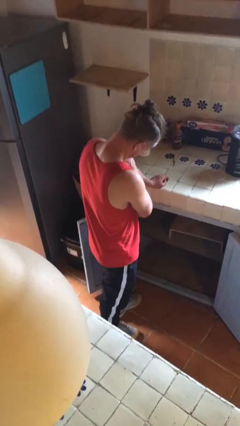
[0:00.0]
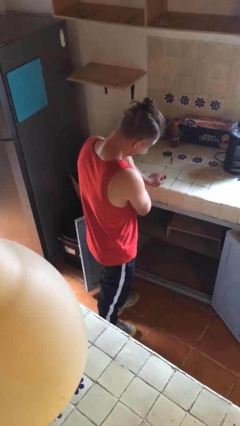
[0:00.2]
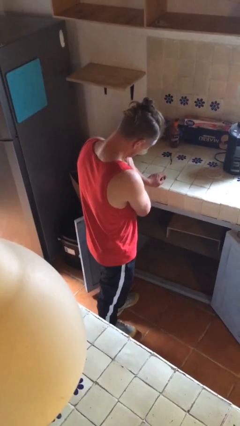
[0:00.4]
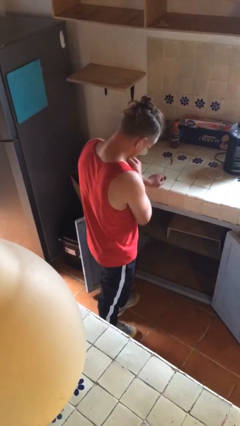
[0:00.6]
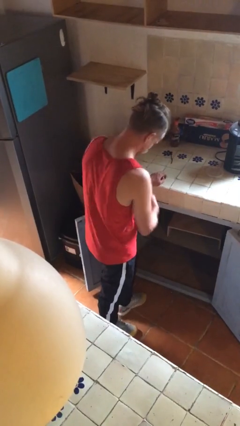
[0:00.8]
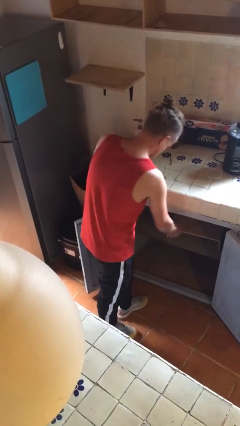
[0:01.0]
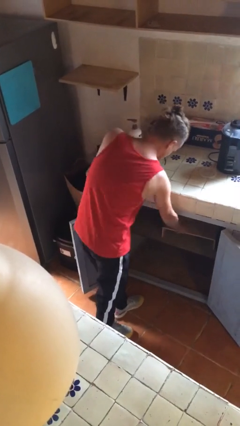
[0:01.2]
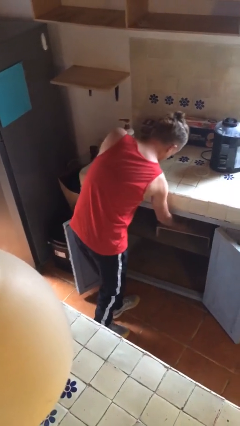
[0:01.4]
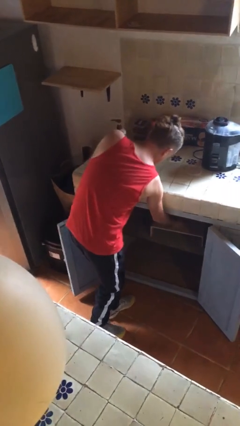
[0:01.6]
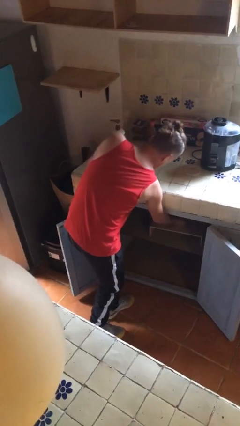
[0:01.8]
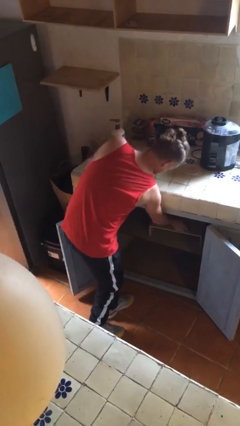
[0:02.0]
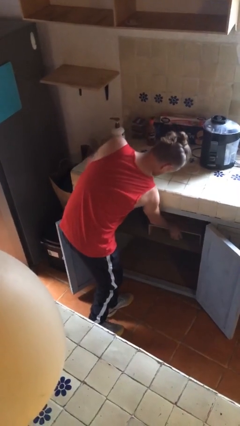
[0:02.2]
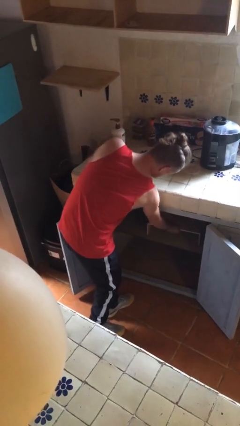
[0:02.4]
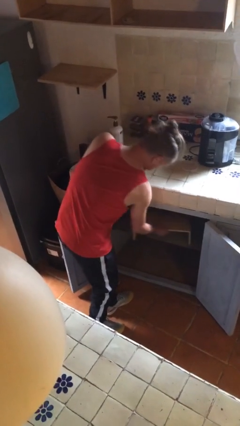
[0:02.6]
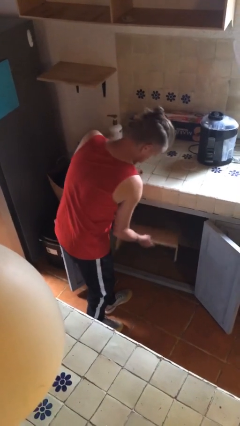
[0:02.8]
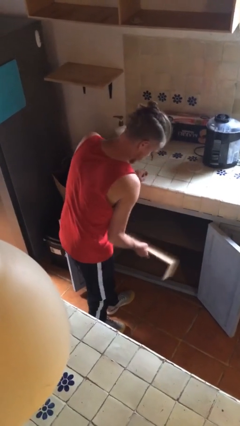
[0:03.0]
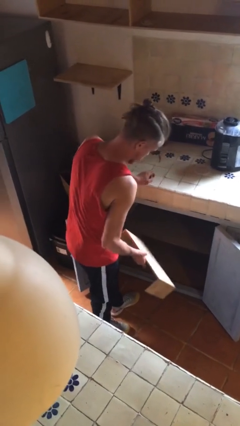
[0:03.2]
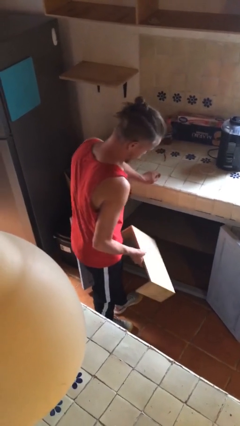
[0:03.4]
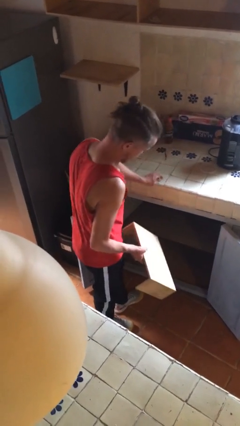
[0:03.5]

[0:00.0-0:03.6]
person picks up object from cabinet

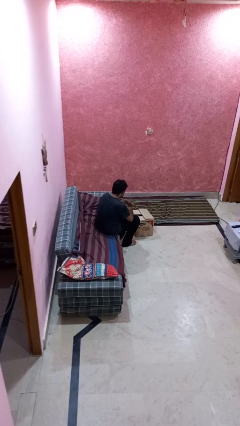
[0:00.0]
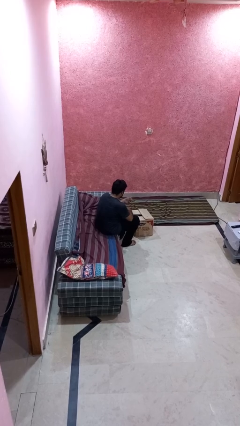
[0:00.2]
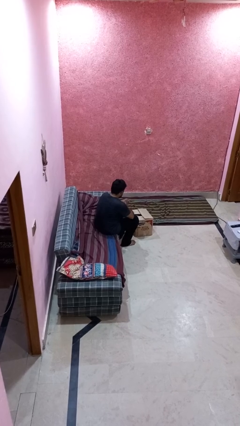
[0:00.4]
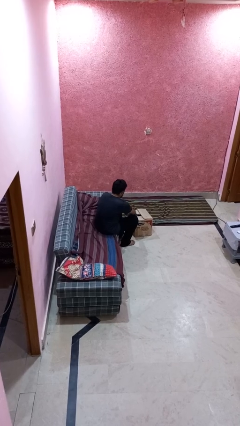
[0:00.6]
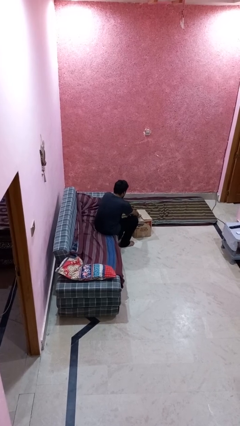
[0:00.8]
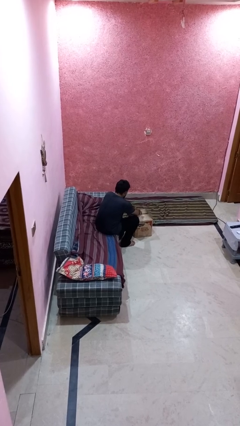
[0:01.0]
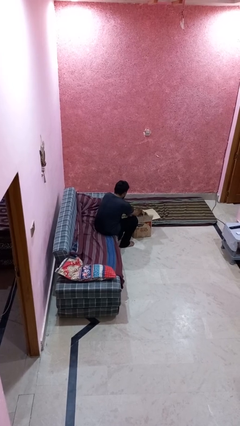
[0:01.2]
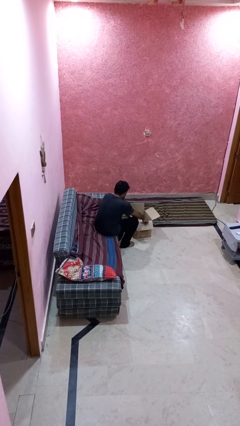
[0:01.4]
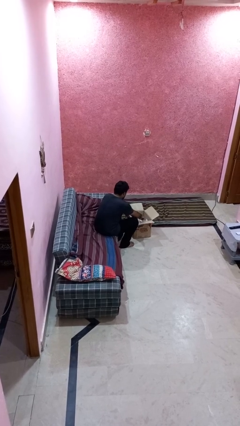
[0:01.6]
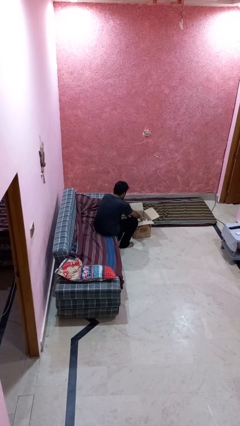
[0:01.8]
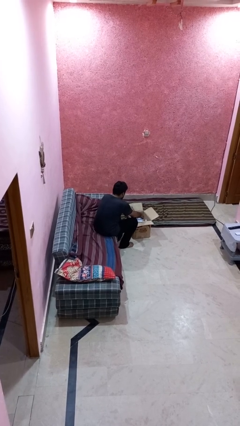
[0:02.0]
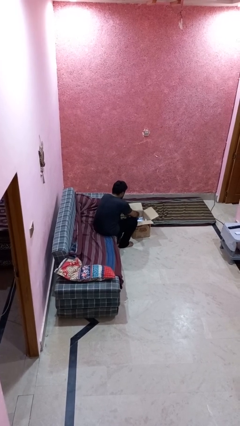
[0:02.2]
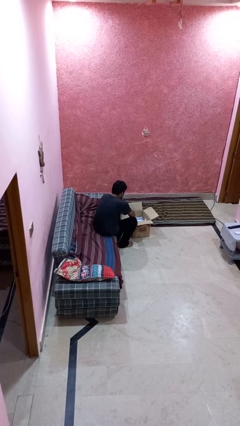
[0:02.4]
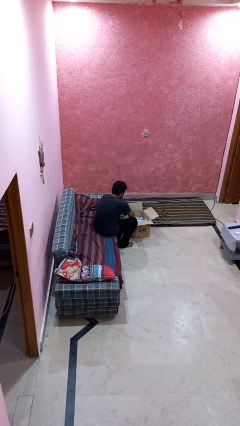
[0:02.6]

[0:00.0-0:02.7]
person opens box

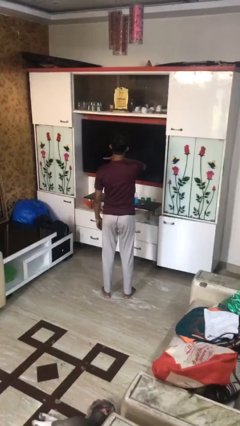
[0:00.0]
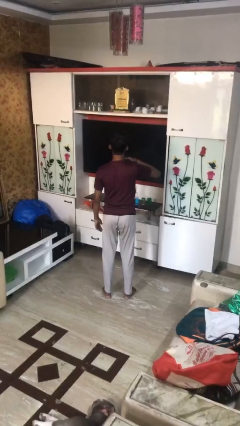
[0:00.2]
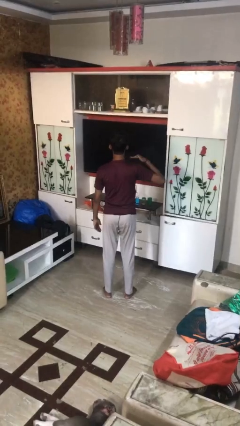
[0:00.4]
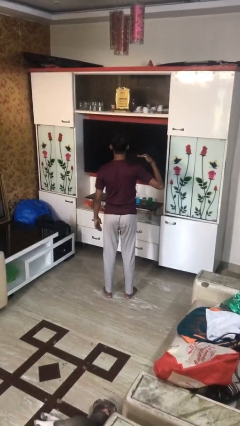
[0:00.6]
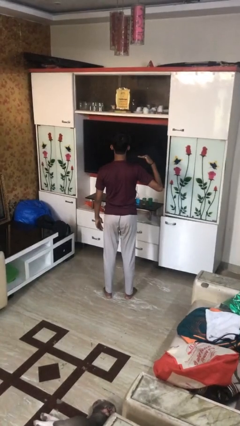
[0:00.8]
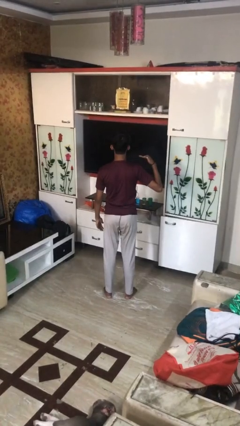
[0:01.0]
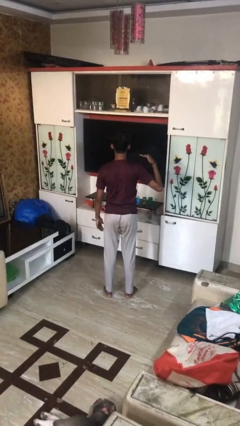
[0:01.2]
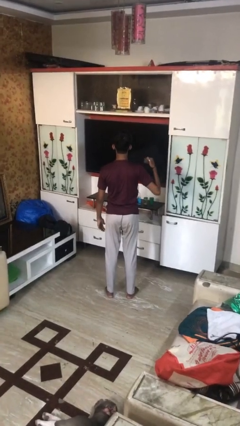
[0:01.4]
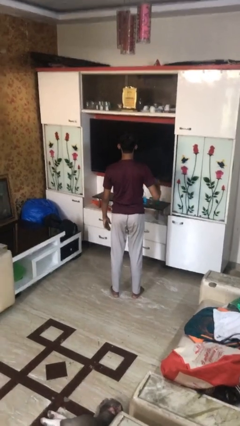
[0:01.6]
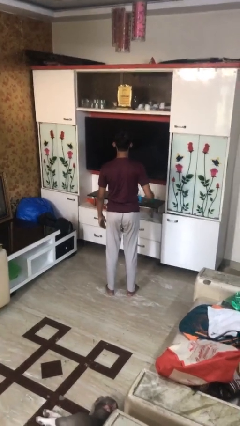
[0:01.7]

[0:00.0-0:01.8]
person gestures cut

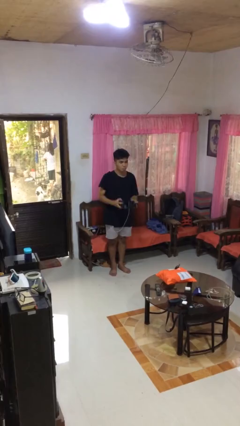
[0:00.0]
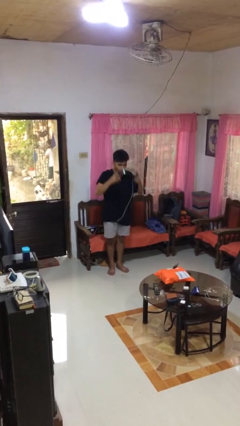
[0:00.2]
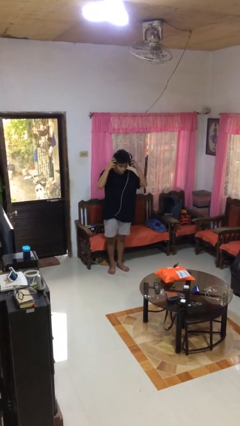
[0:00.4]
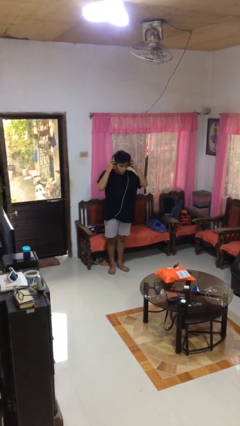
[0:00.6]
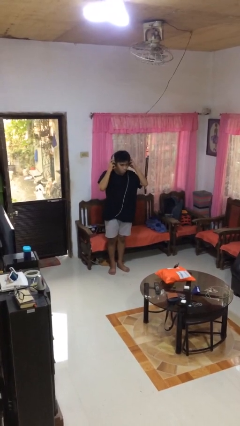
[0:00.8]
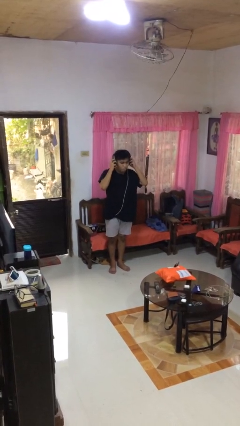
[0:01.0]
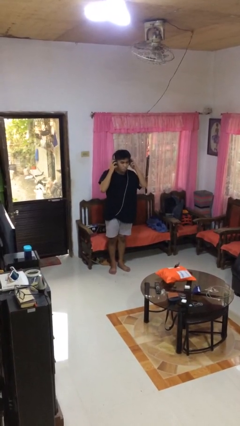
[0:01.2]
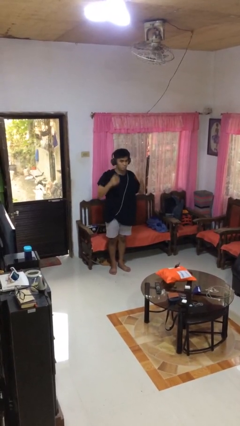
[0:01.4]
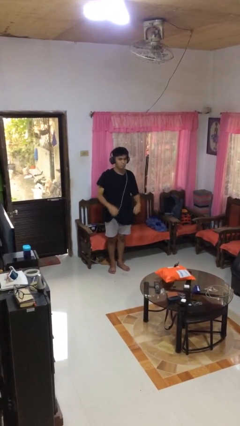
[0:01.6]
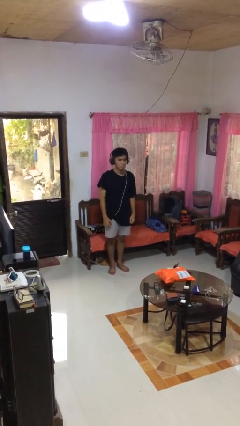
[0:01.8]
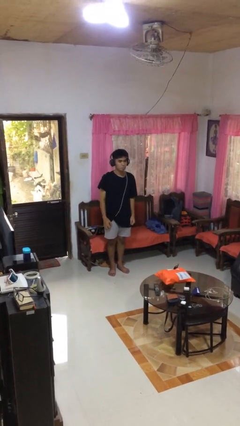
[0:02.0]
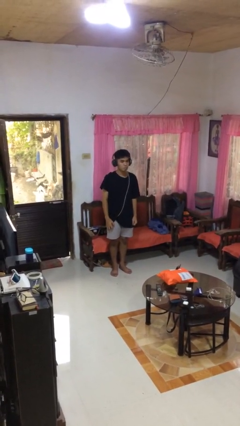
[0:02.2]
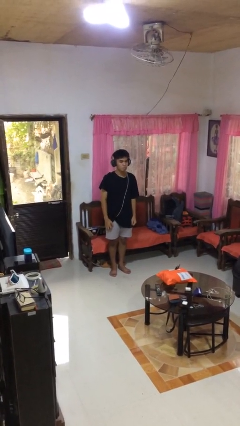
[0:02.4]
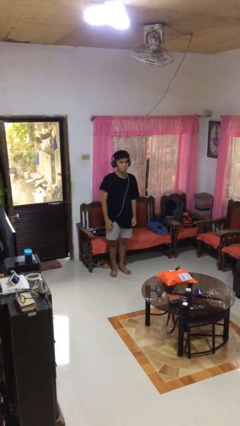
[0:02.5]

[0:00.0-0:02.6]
person puts on headphones

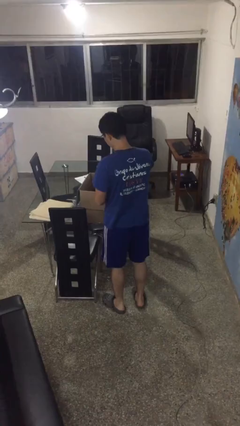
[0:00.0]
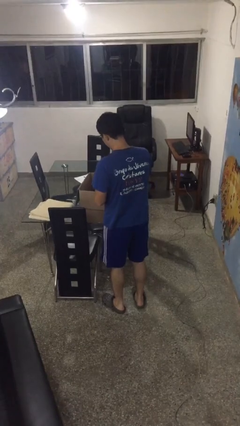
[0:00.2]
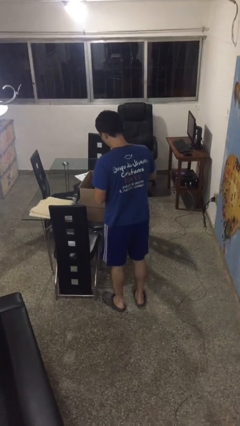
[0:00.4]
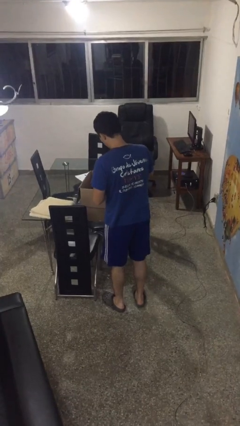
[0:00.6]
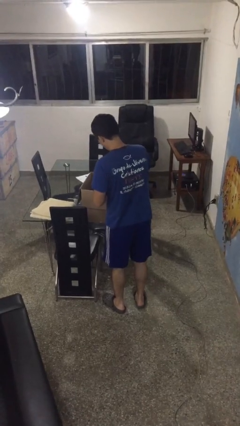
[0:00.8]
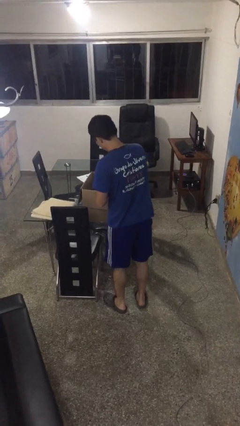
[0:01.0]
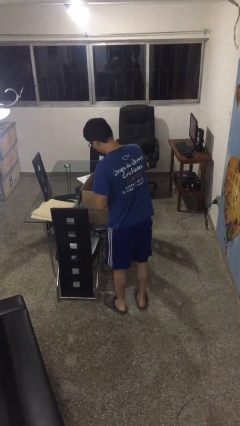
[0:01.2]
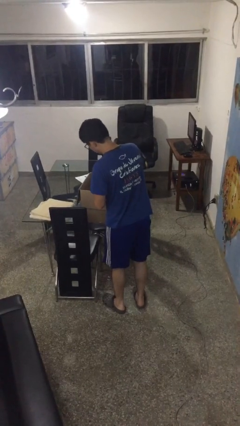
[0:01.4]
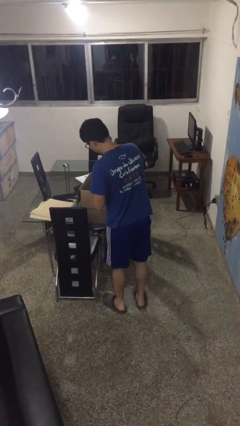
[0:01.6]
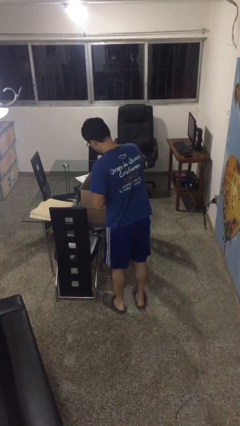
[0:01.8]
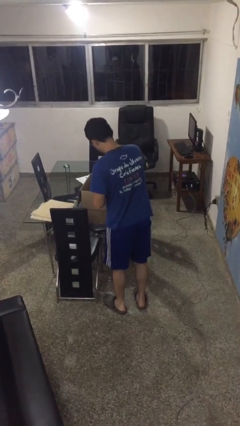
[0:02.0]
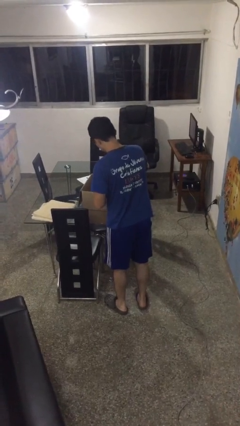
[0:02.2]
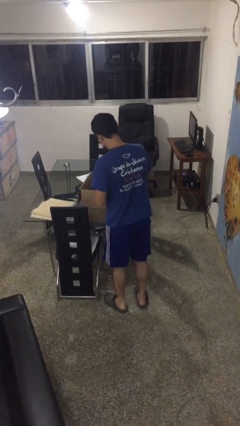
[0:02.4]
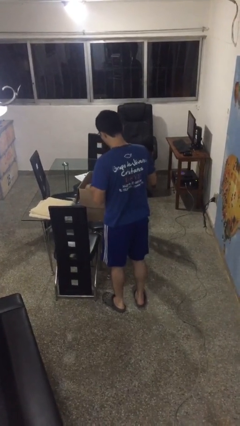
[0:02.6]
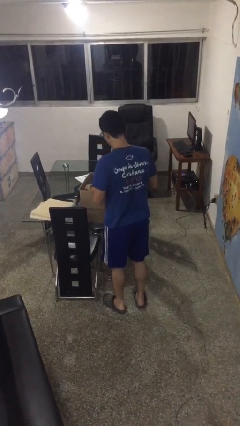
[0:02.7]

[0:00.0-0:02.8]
person searches in box

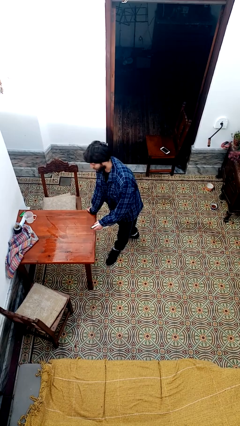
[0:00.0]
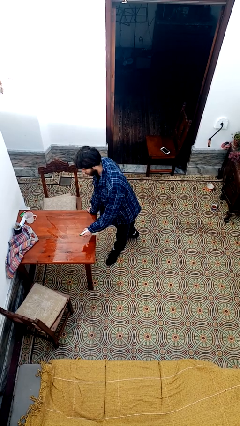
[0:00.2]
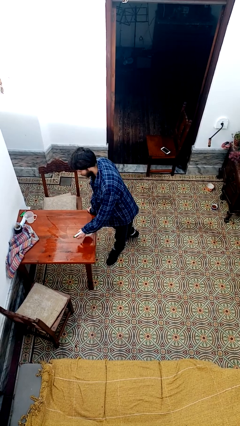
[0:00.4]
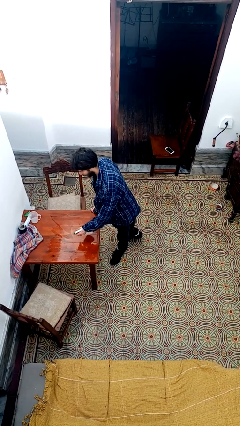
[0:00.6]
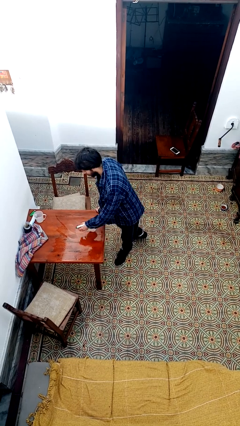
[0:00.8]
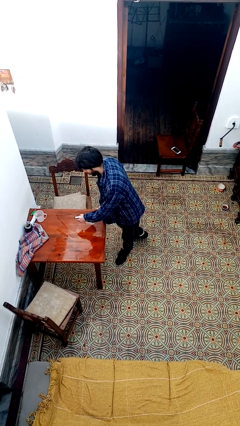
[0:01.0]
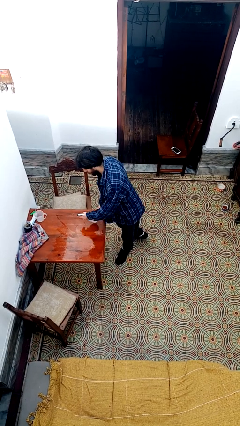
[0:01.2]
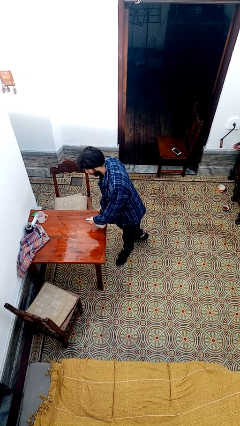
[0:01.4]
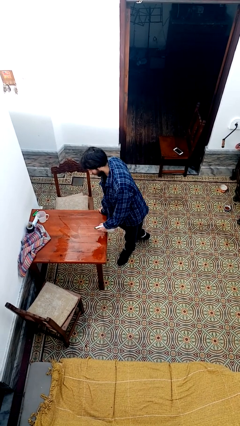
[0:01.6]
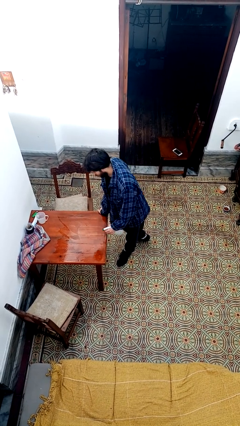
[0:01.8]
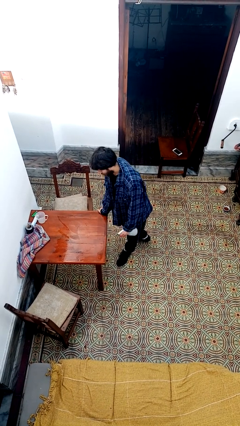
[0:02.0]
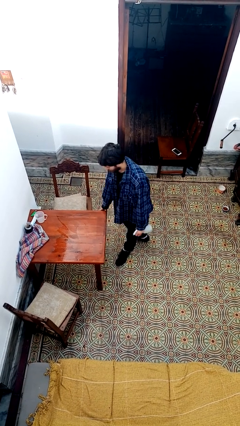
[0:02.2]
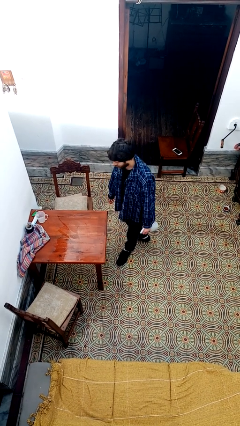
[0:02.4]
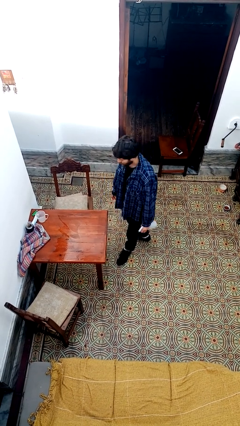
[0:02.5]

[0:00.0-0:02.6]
person sprays from bottle

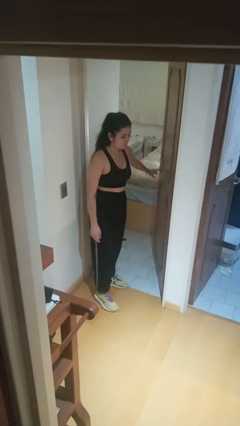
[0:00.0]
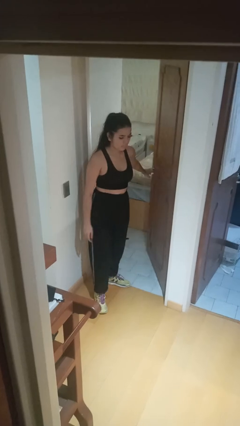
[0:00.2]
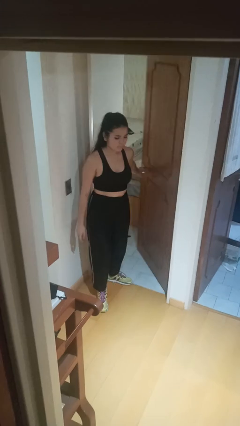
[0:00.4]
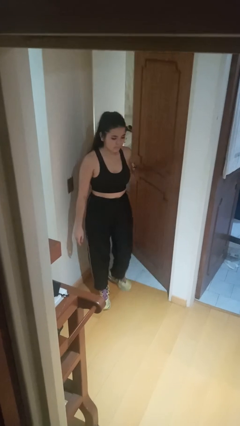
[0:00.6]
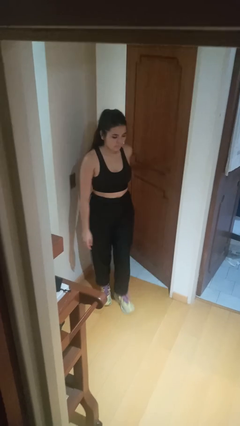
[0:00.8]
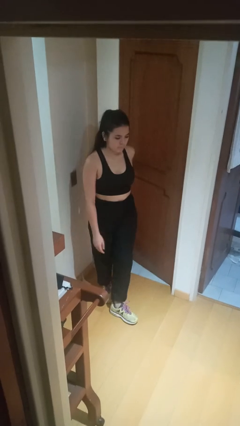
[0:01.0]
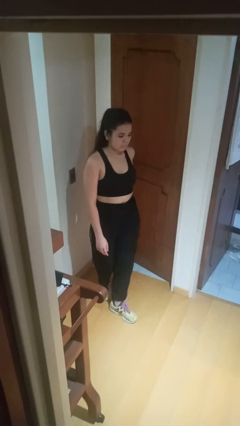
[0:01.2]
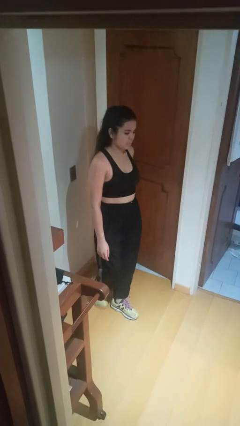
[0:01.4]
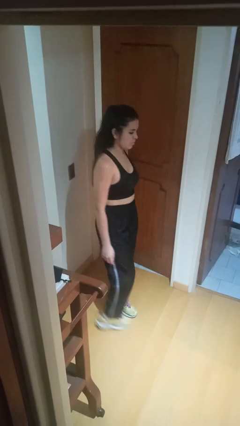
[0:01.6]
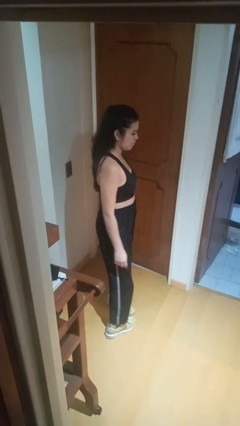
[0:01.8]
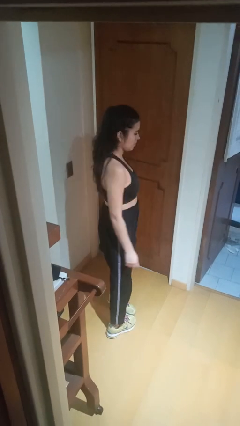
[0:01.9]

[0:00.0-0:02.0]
person closes facility door
